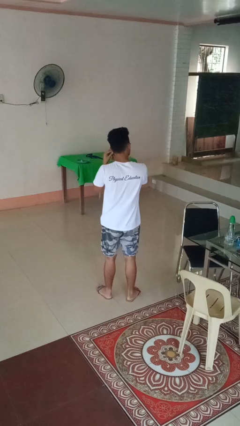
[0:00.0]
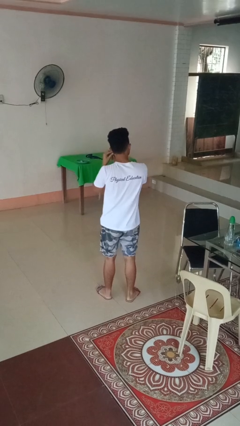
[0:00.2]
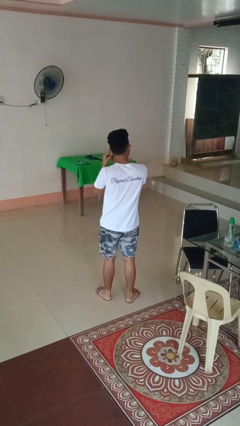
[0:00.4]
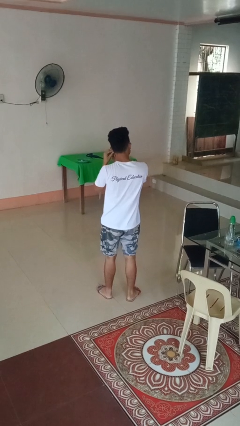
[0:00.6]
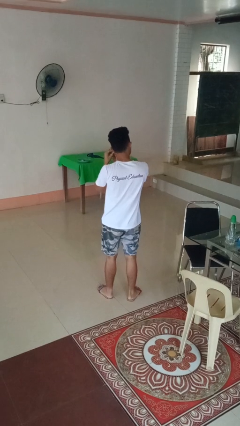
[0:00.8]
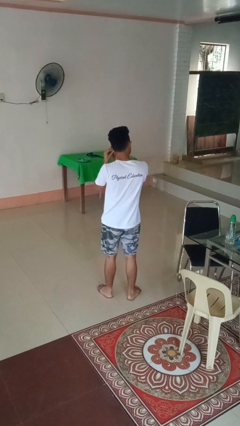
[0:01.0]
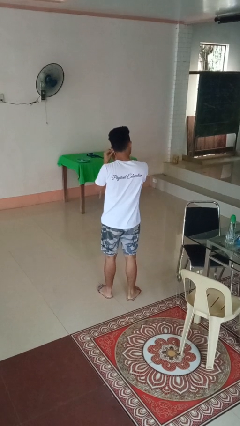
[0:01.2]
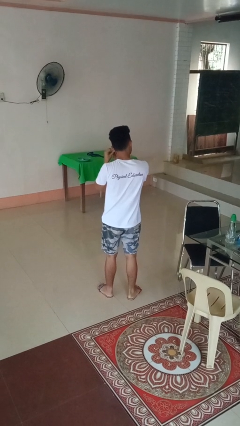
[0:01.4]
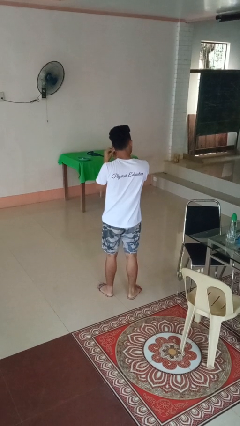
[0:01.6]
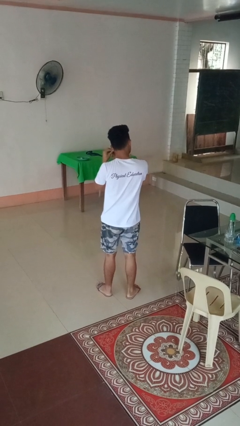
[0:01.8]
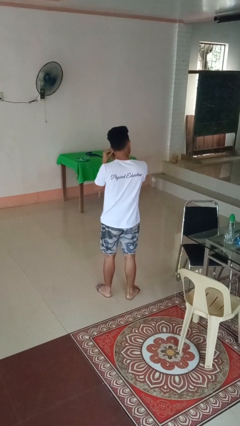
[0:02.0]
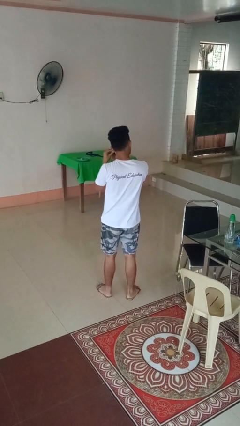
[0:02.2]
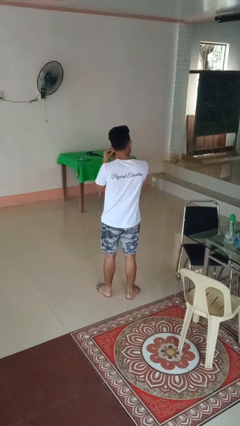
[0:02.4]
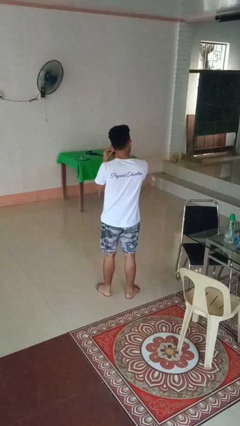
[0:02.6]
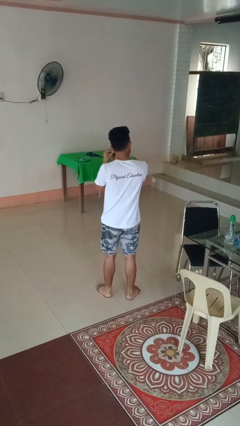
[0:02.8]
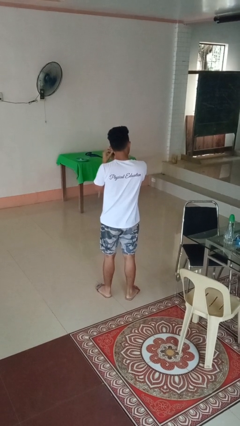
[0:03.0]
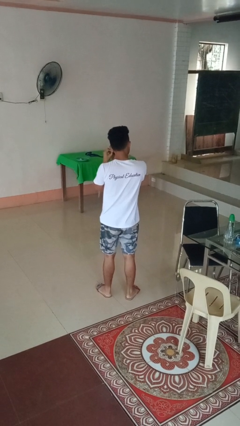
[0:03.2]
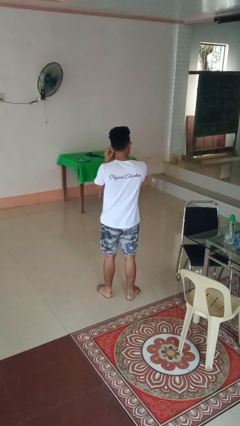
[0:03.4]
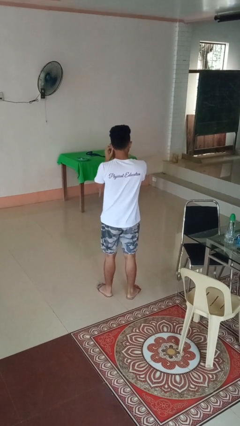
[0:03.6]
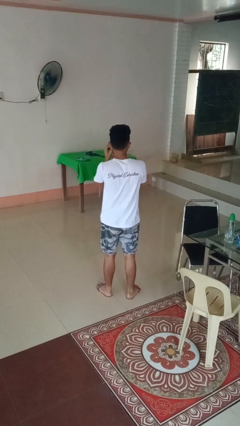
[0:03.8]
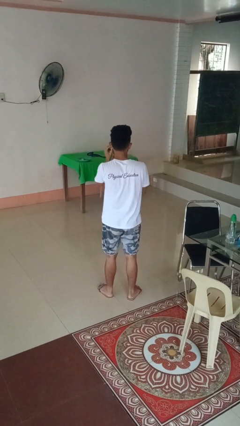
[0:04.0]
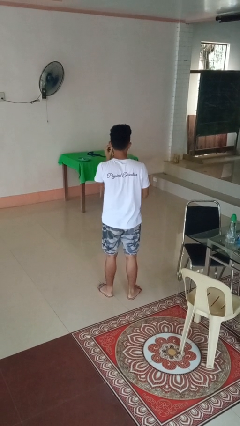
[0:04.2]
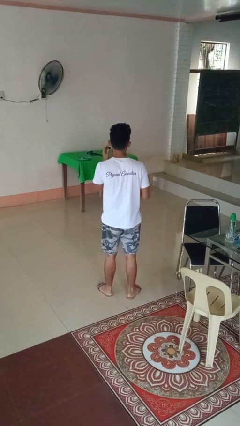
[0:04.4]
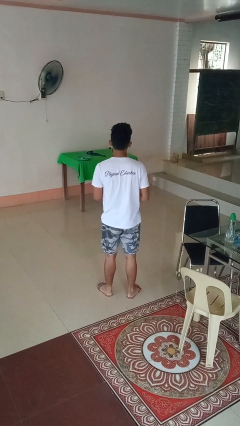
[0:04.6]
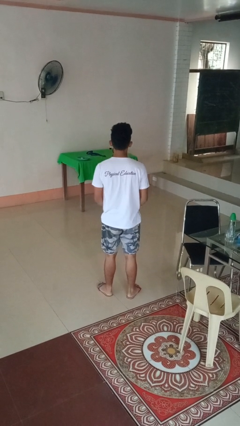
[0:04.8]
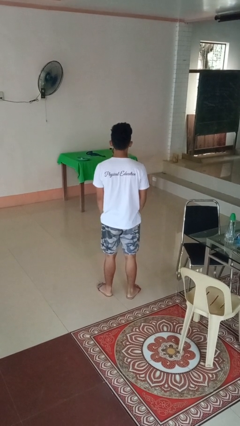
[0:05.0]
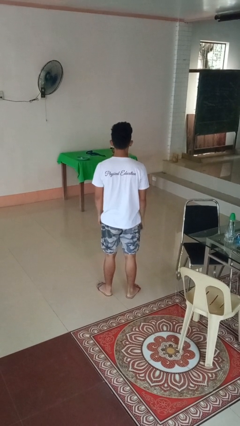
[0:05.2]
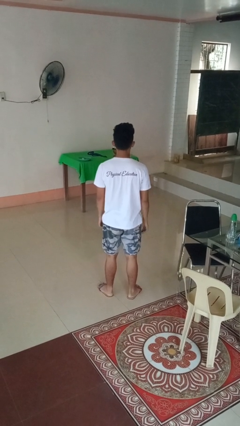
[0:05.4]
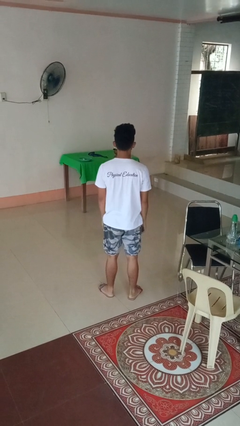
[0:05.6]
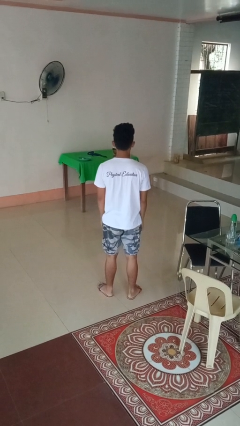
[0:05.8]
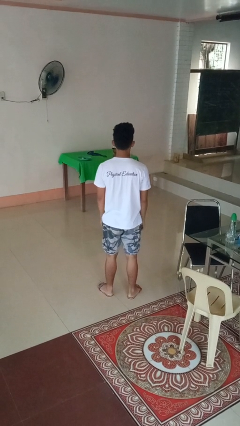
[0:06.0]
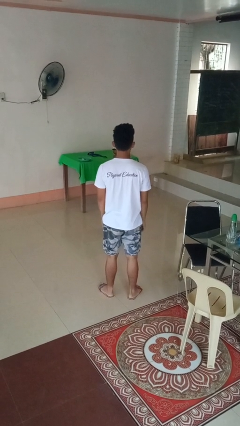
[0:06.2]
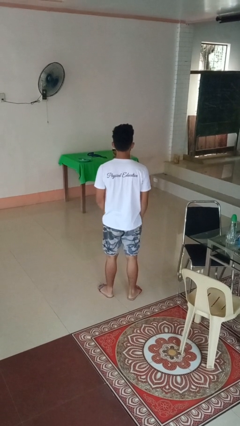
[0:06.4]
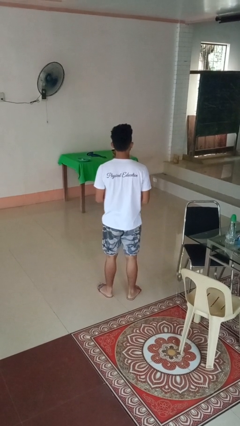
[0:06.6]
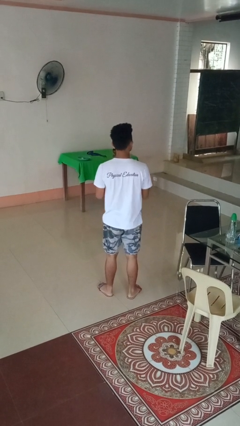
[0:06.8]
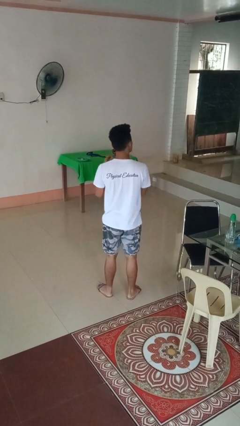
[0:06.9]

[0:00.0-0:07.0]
person puts on earrings

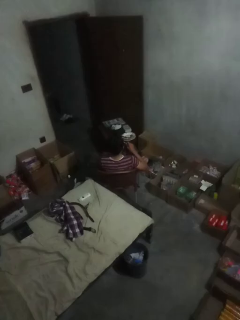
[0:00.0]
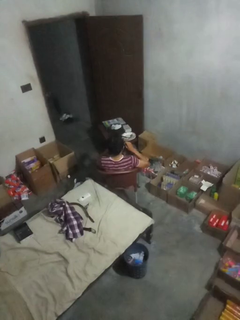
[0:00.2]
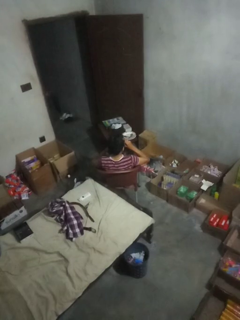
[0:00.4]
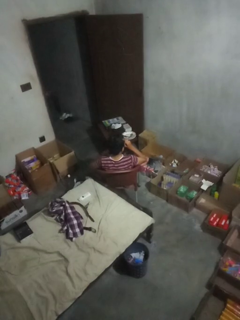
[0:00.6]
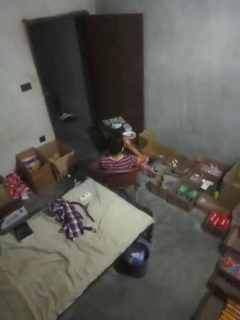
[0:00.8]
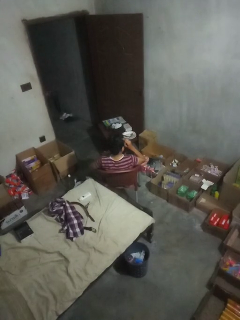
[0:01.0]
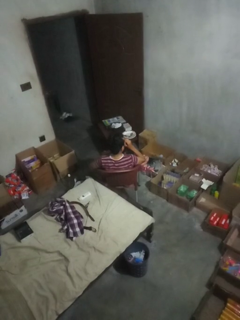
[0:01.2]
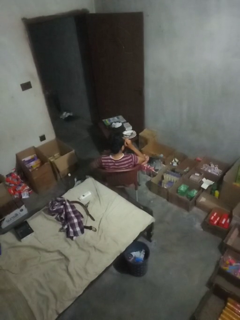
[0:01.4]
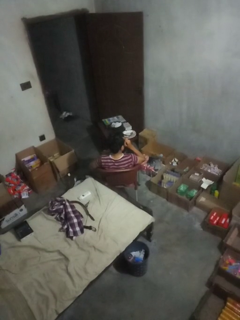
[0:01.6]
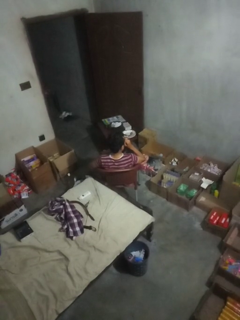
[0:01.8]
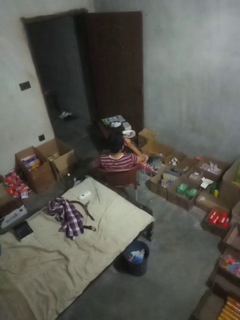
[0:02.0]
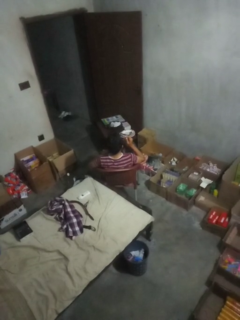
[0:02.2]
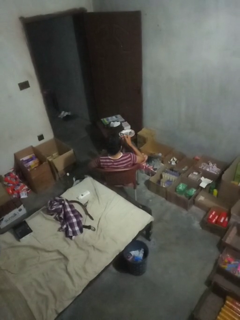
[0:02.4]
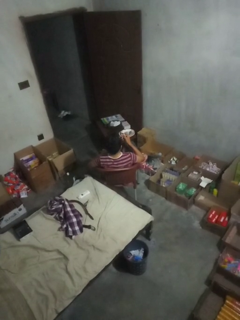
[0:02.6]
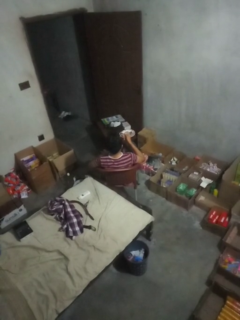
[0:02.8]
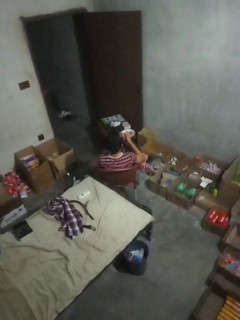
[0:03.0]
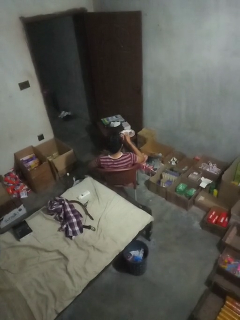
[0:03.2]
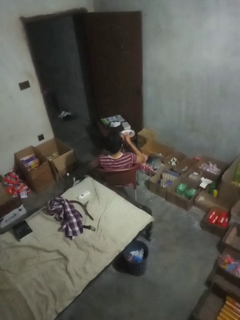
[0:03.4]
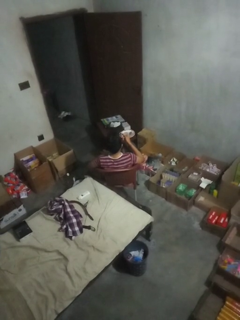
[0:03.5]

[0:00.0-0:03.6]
person flosses

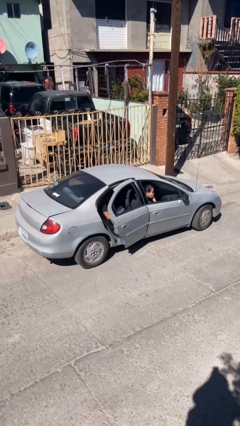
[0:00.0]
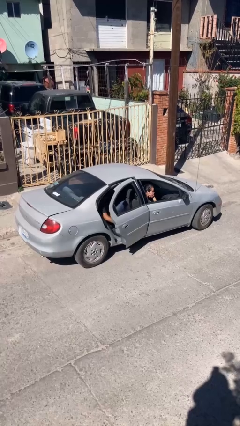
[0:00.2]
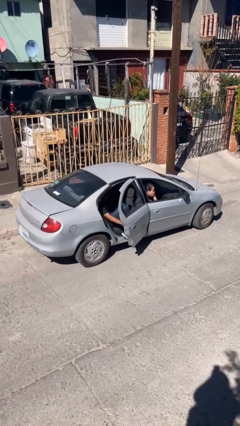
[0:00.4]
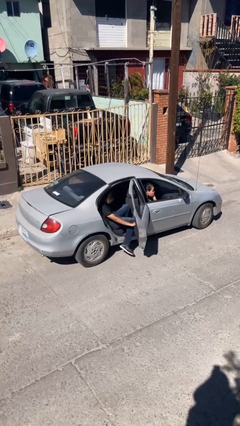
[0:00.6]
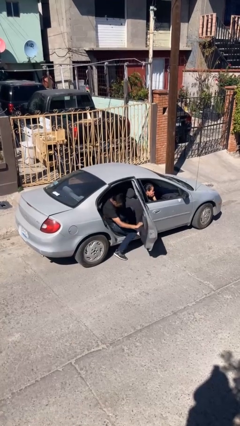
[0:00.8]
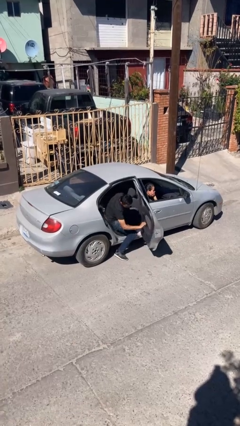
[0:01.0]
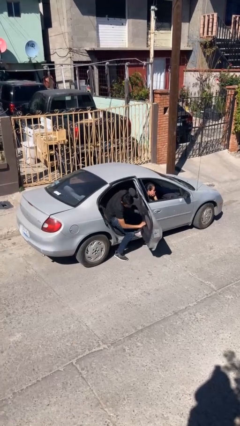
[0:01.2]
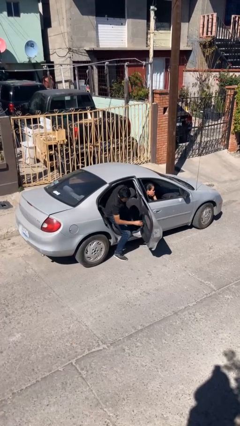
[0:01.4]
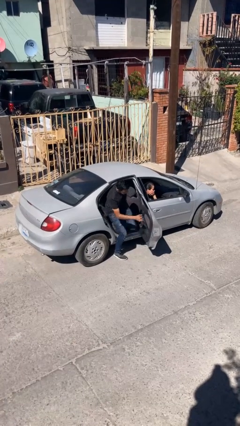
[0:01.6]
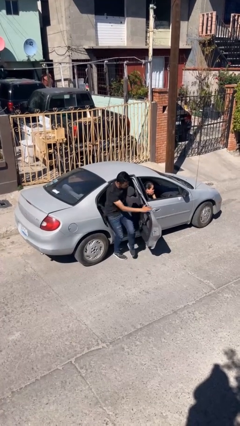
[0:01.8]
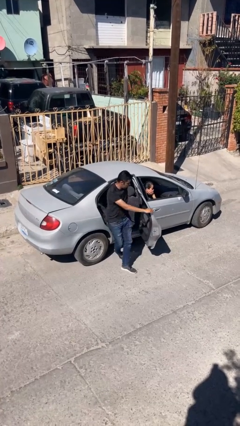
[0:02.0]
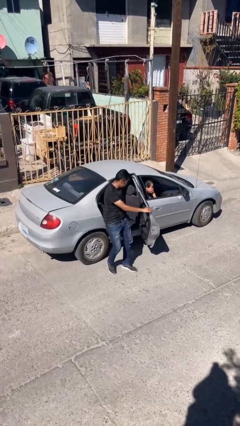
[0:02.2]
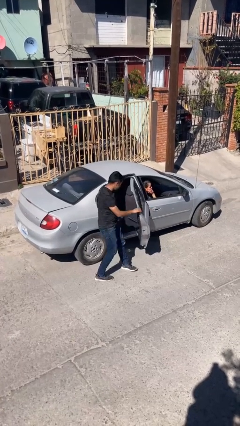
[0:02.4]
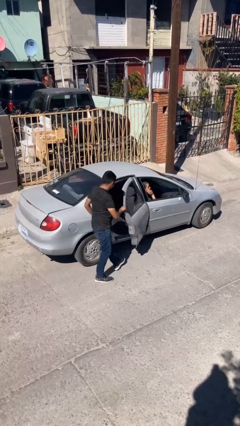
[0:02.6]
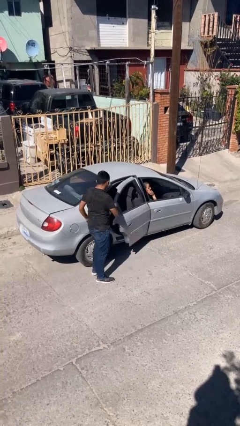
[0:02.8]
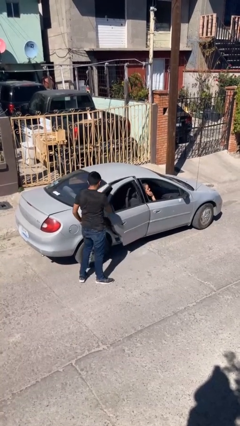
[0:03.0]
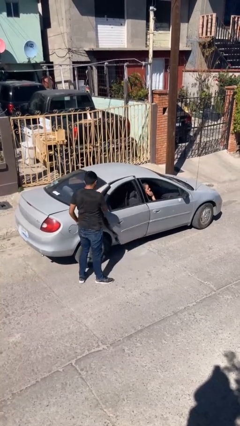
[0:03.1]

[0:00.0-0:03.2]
car drops off person

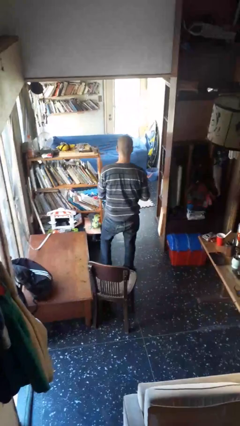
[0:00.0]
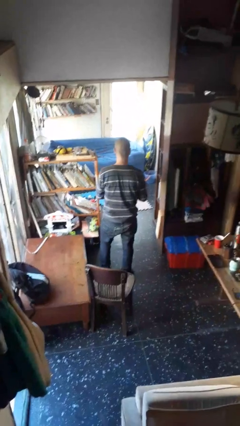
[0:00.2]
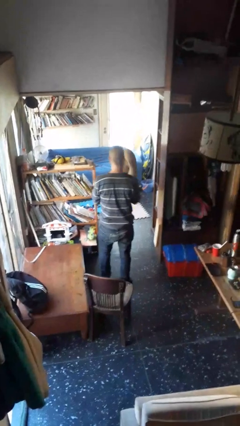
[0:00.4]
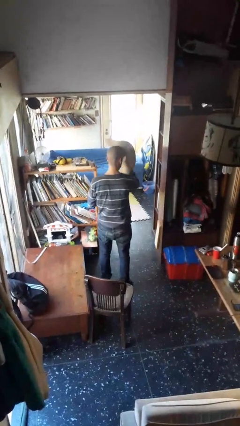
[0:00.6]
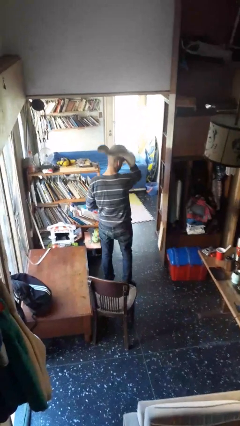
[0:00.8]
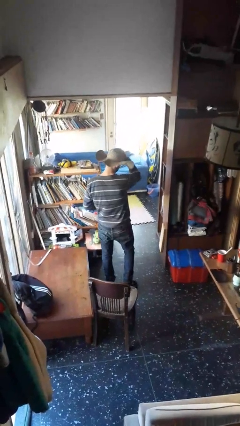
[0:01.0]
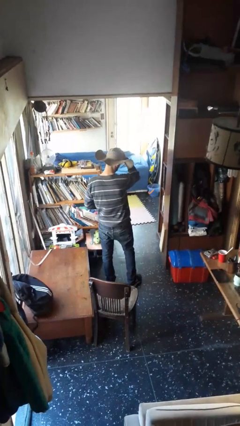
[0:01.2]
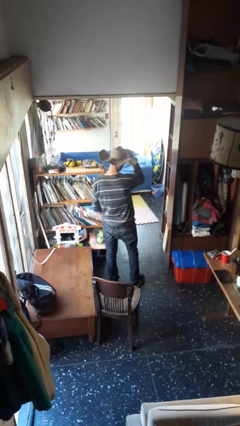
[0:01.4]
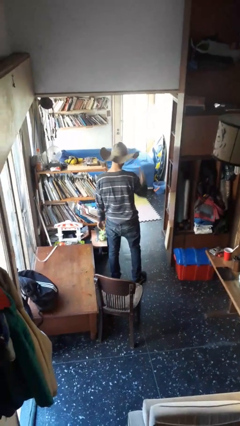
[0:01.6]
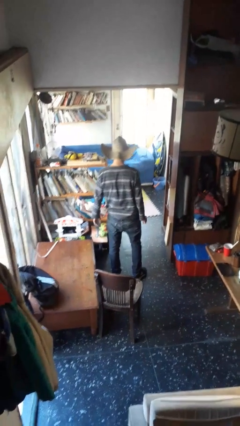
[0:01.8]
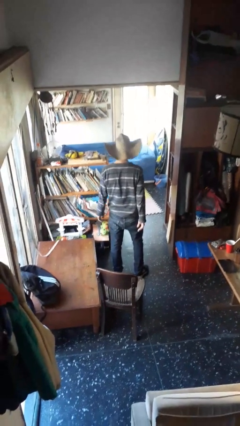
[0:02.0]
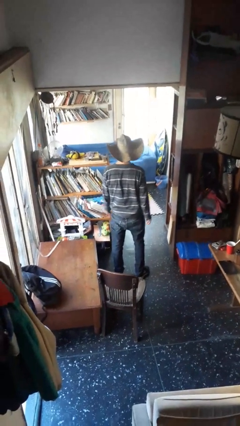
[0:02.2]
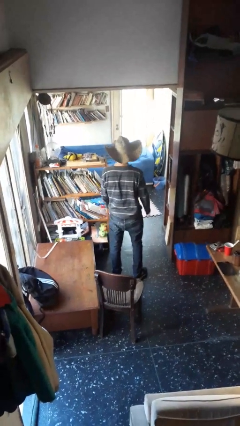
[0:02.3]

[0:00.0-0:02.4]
person puts on hat

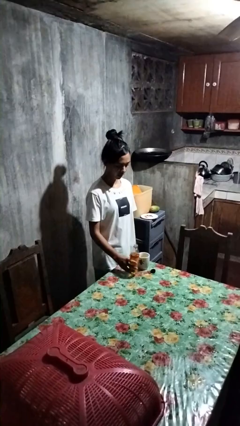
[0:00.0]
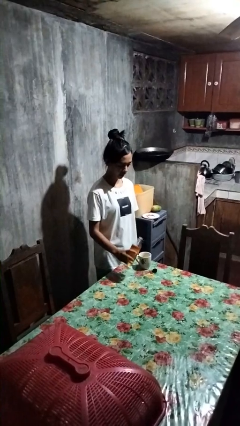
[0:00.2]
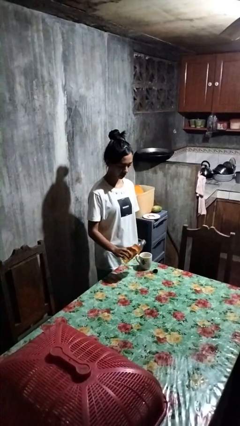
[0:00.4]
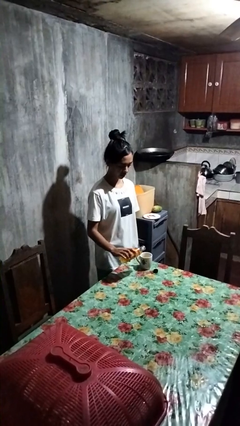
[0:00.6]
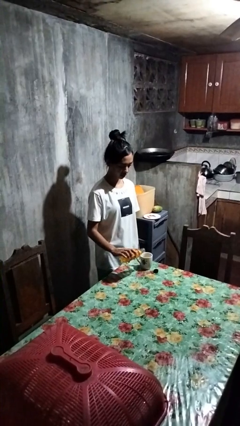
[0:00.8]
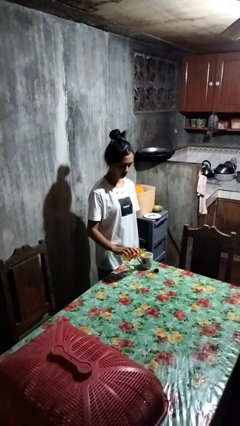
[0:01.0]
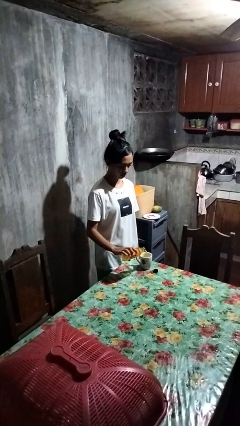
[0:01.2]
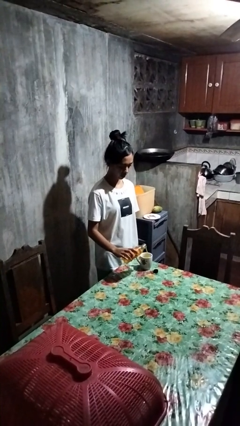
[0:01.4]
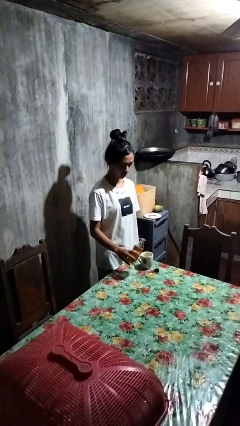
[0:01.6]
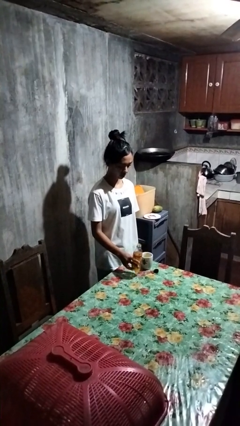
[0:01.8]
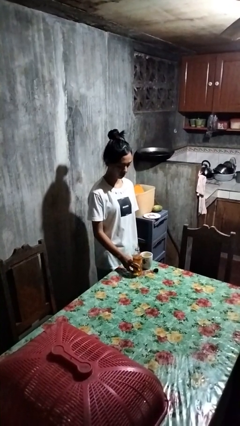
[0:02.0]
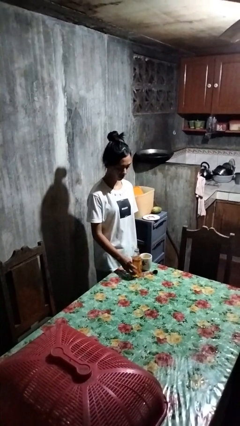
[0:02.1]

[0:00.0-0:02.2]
person pours liquid into cup
